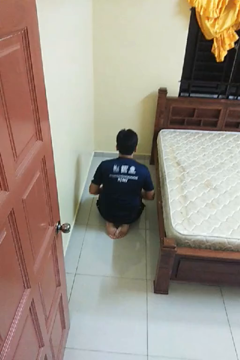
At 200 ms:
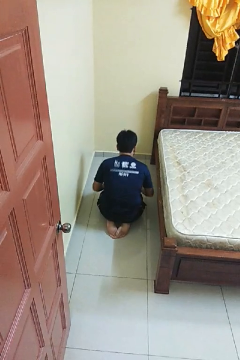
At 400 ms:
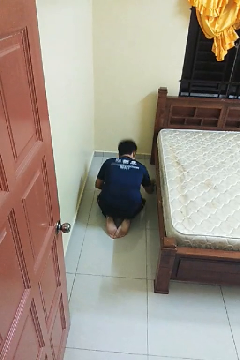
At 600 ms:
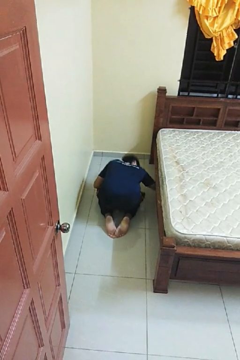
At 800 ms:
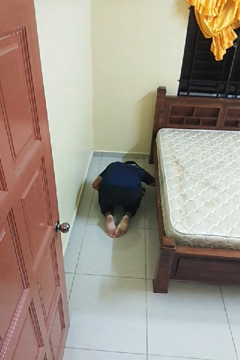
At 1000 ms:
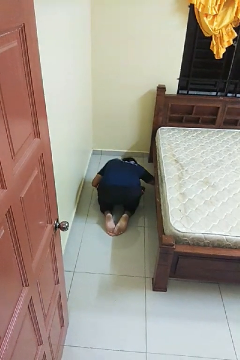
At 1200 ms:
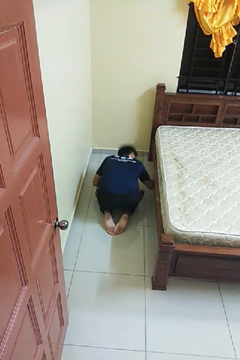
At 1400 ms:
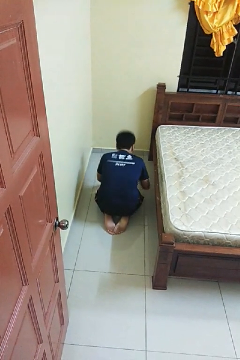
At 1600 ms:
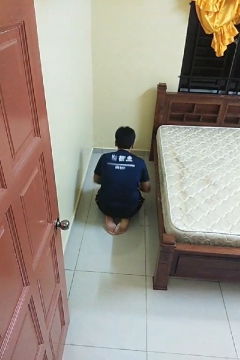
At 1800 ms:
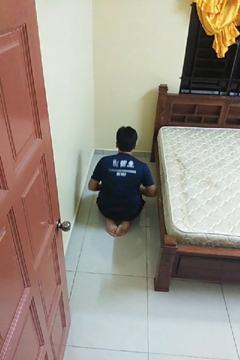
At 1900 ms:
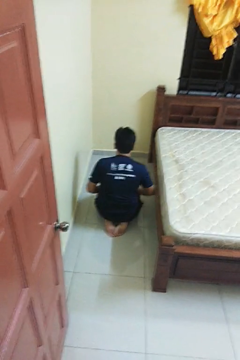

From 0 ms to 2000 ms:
person searches under bed

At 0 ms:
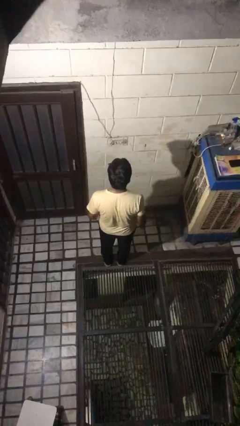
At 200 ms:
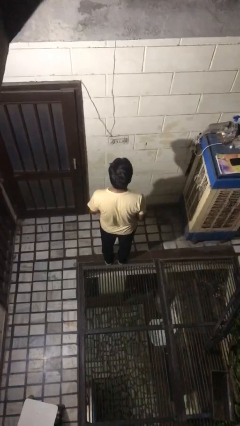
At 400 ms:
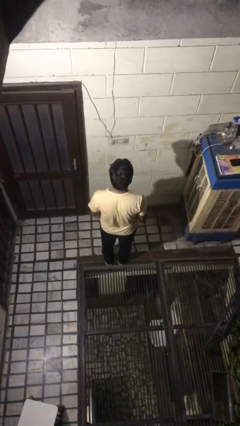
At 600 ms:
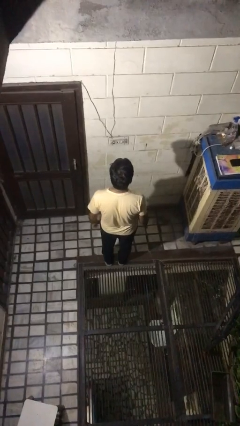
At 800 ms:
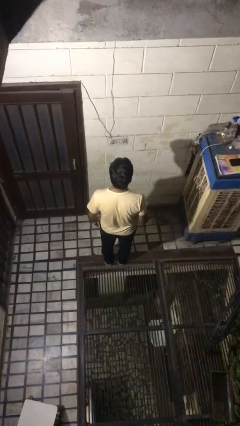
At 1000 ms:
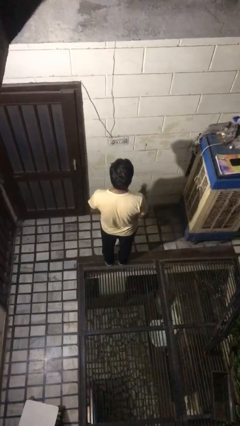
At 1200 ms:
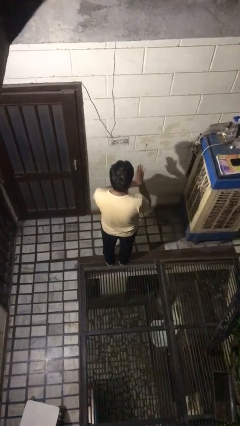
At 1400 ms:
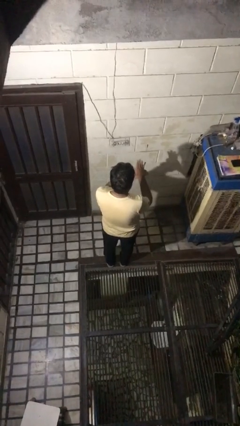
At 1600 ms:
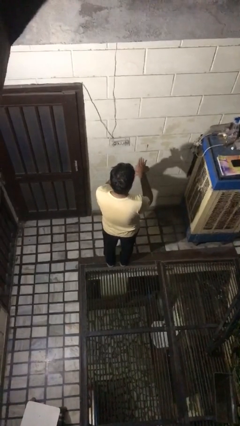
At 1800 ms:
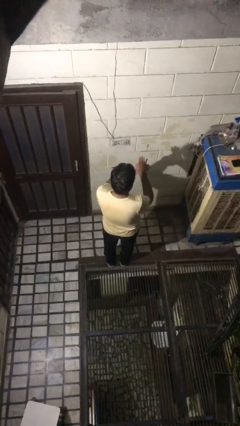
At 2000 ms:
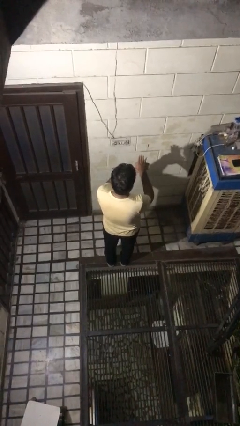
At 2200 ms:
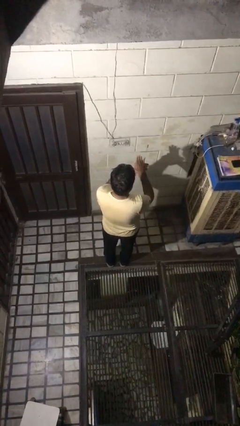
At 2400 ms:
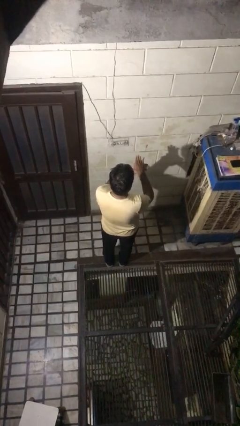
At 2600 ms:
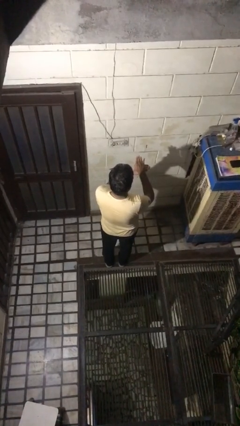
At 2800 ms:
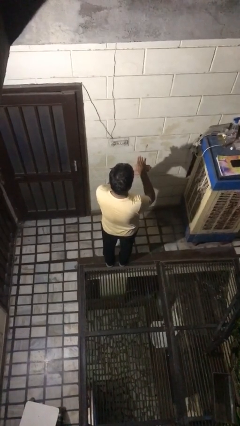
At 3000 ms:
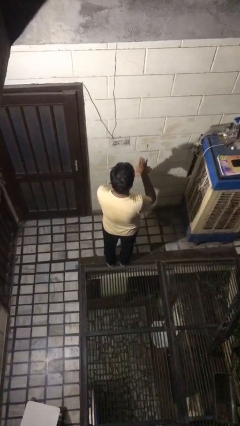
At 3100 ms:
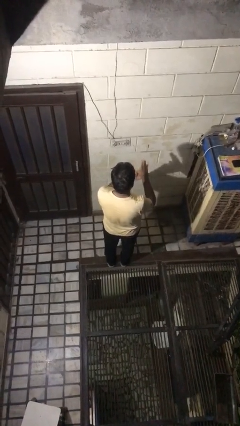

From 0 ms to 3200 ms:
person gestures number four

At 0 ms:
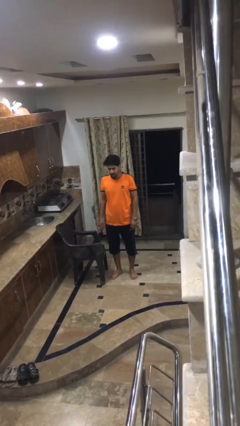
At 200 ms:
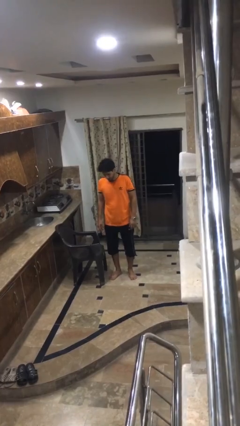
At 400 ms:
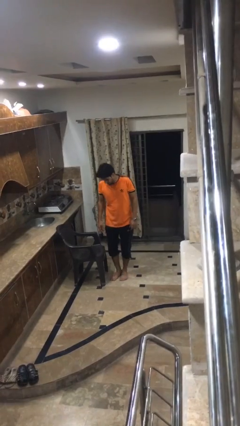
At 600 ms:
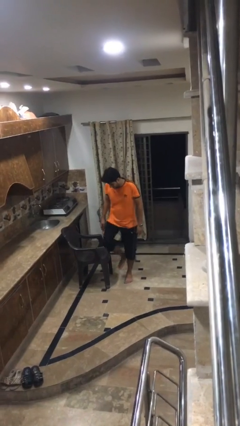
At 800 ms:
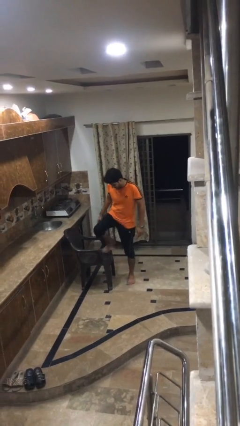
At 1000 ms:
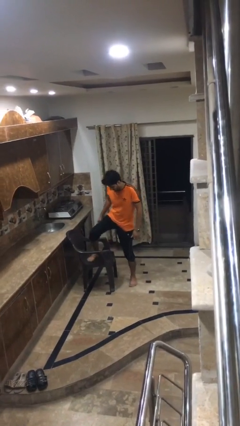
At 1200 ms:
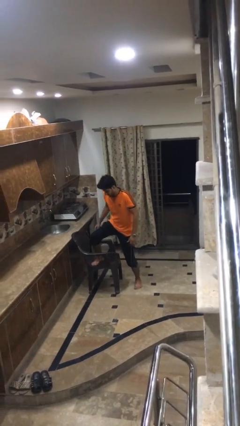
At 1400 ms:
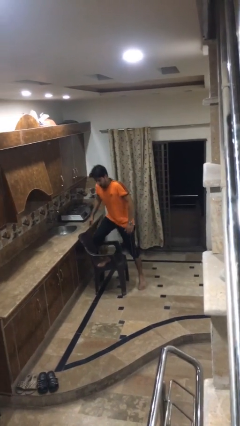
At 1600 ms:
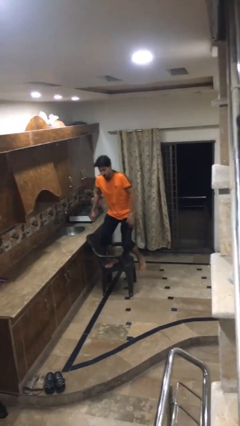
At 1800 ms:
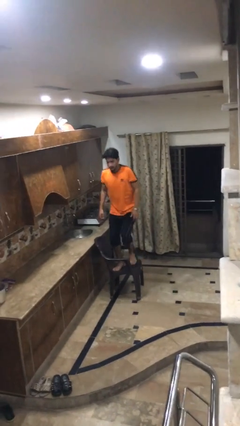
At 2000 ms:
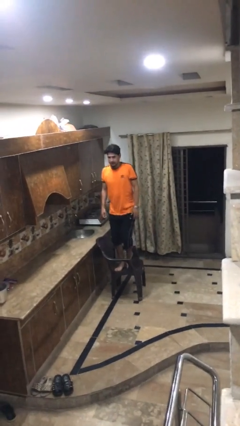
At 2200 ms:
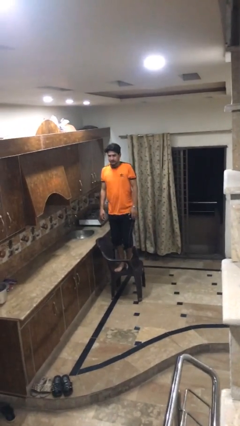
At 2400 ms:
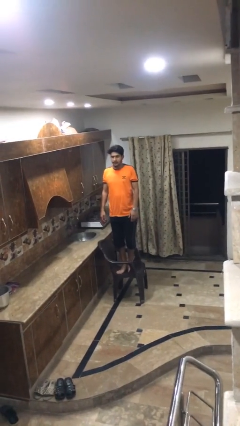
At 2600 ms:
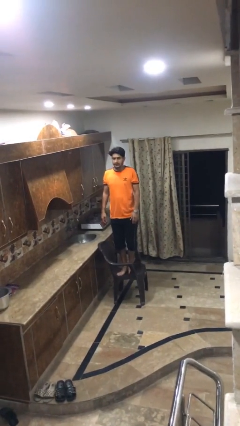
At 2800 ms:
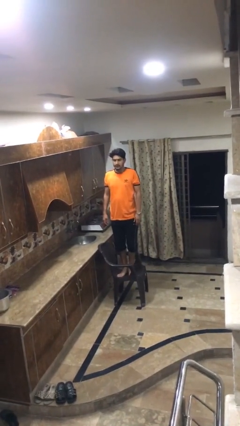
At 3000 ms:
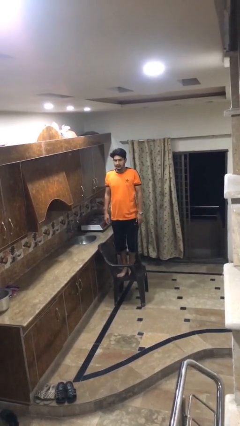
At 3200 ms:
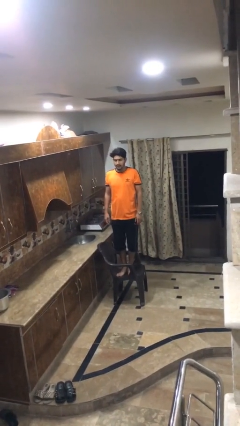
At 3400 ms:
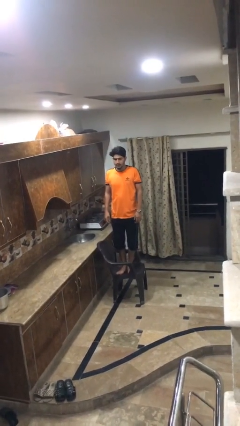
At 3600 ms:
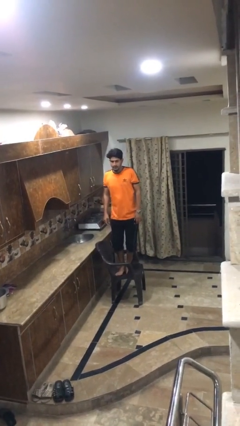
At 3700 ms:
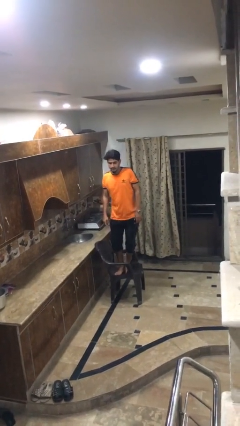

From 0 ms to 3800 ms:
person climbs on chair

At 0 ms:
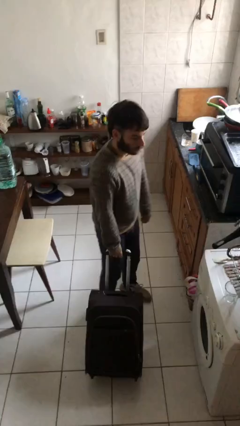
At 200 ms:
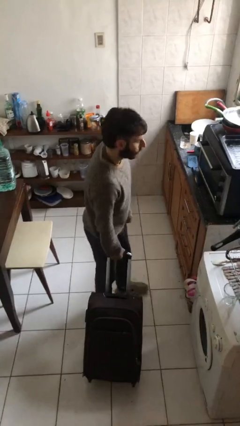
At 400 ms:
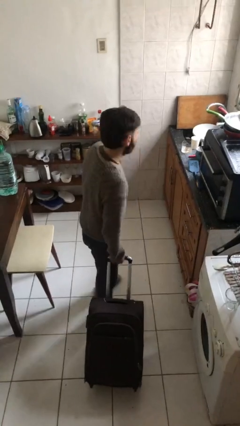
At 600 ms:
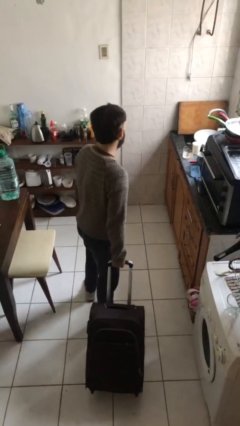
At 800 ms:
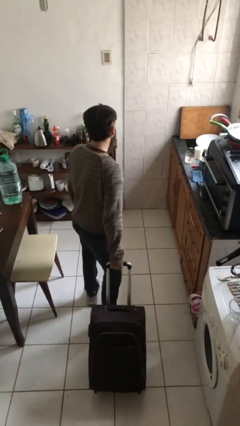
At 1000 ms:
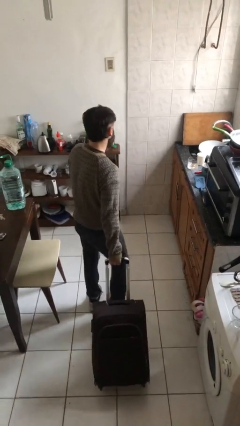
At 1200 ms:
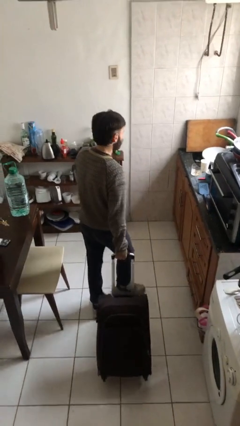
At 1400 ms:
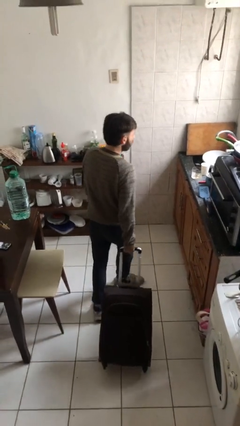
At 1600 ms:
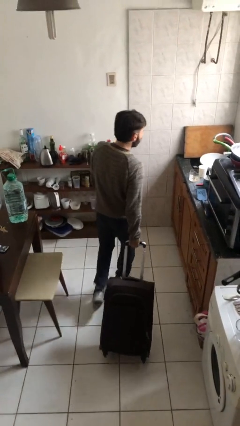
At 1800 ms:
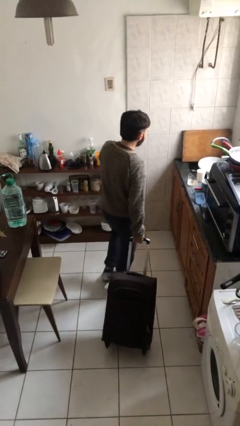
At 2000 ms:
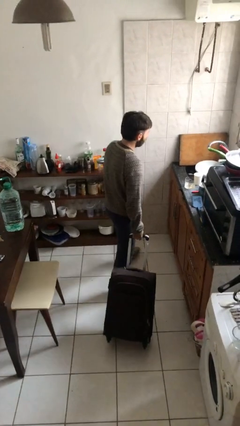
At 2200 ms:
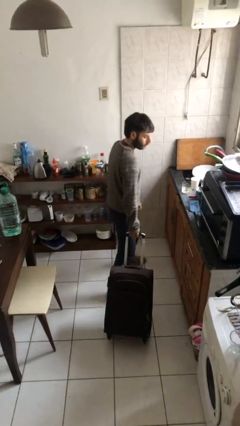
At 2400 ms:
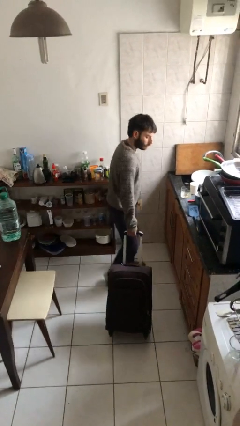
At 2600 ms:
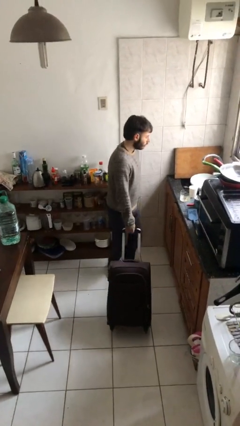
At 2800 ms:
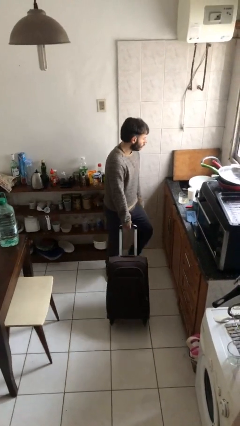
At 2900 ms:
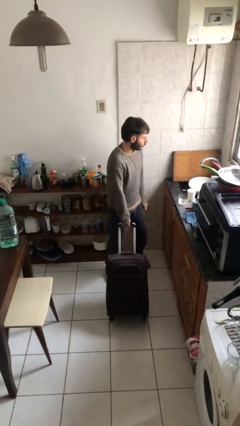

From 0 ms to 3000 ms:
person pulls wheeled cart

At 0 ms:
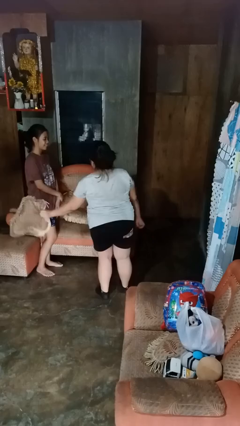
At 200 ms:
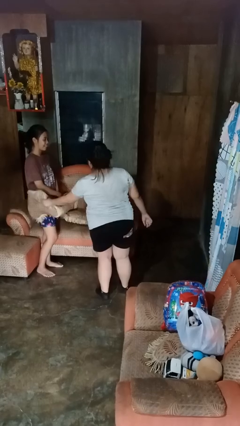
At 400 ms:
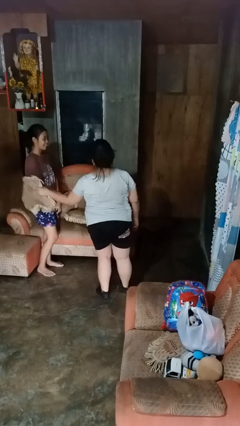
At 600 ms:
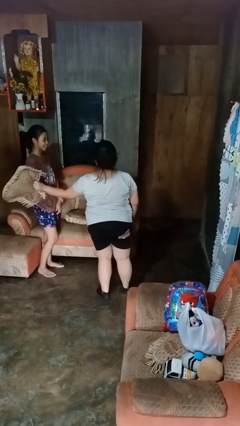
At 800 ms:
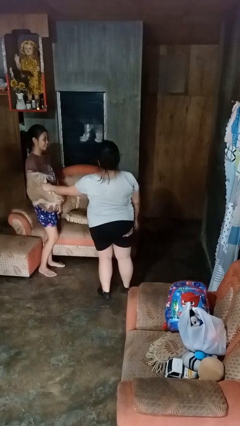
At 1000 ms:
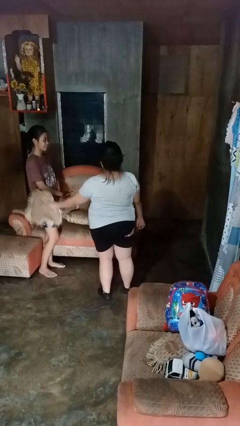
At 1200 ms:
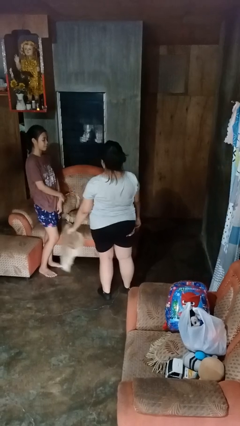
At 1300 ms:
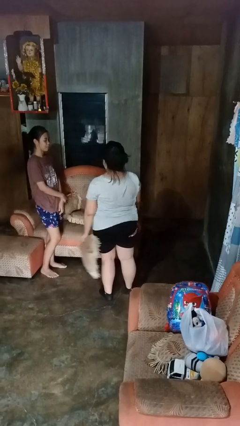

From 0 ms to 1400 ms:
person hits person with pillow

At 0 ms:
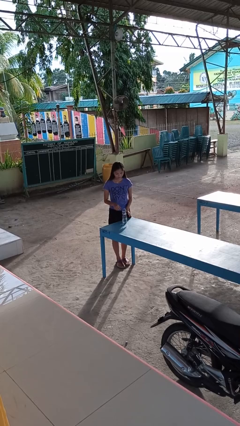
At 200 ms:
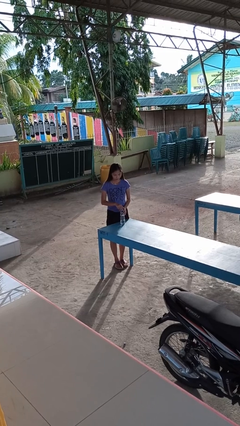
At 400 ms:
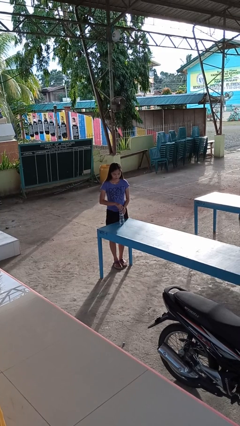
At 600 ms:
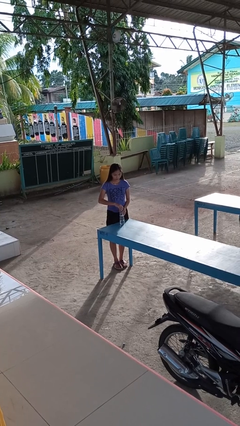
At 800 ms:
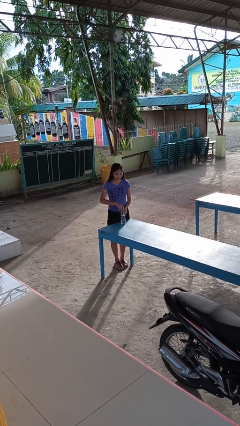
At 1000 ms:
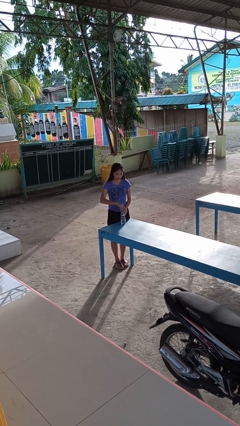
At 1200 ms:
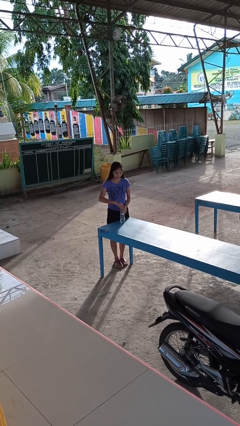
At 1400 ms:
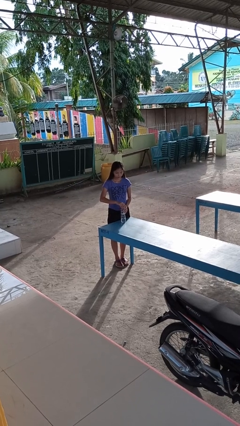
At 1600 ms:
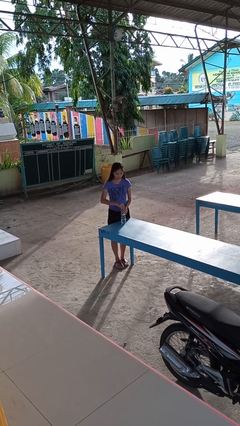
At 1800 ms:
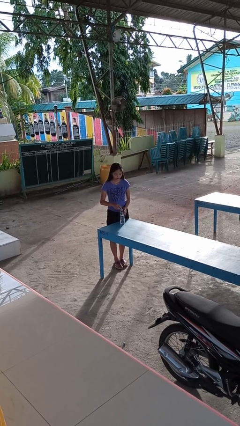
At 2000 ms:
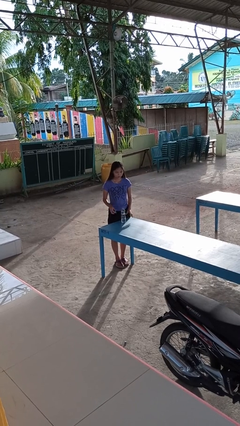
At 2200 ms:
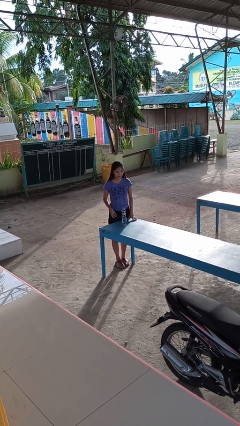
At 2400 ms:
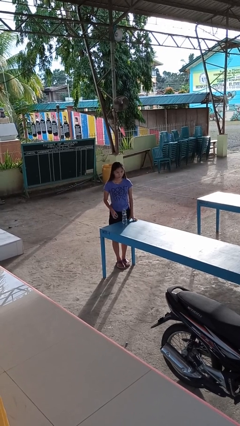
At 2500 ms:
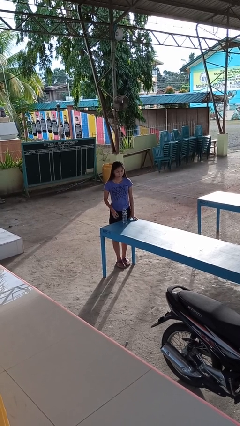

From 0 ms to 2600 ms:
person unscrews lid from bottle

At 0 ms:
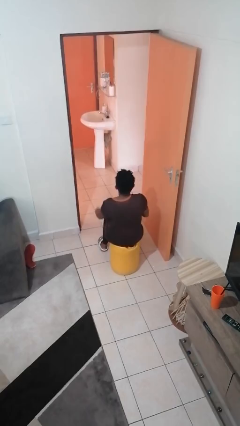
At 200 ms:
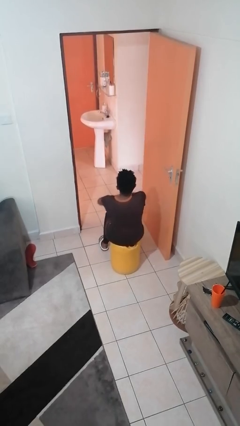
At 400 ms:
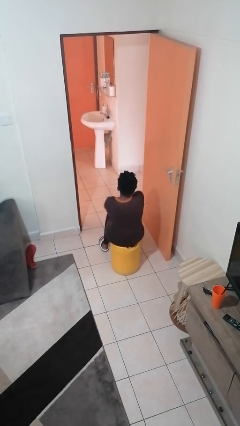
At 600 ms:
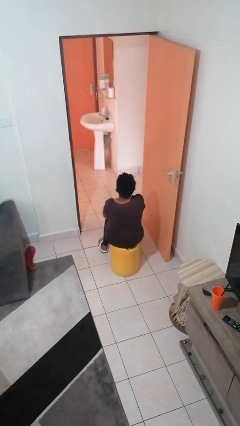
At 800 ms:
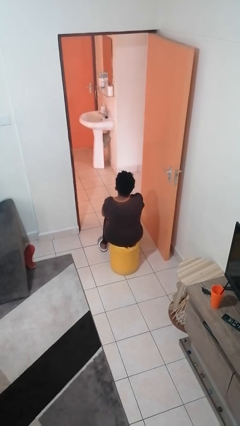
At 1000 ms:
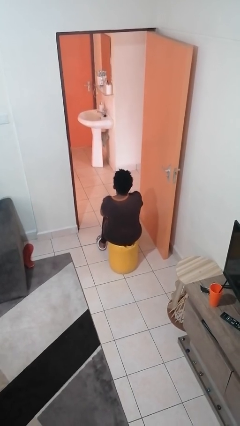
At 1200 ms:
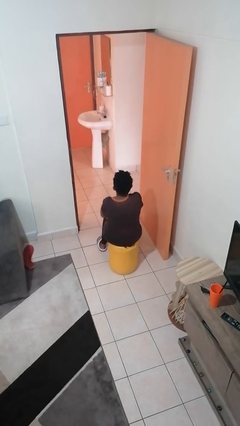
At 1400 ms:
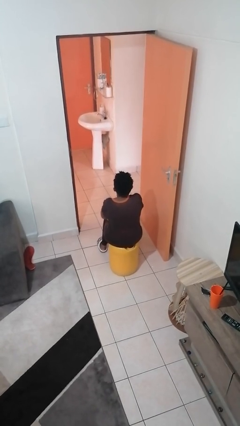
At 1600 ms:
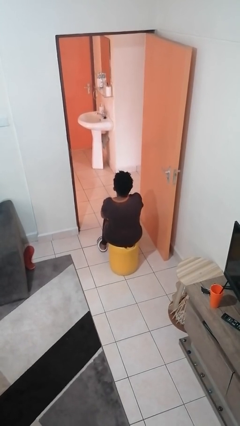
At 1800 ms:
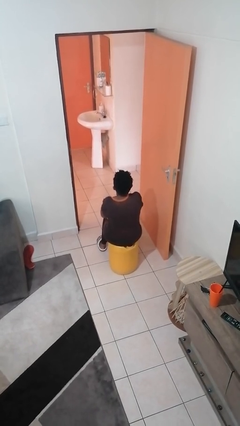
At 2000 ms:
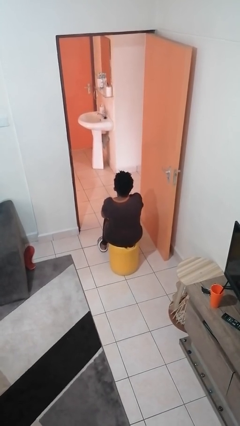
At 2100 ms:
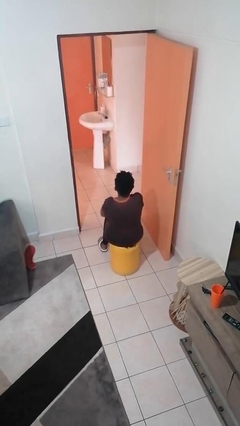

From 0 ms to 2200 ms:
person crosses arms
